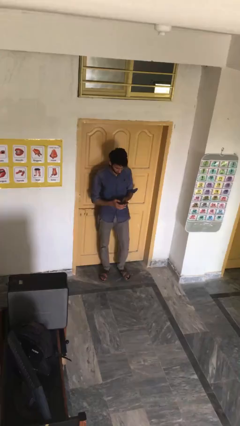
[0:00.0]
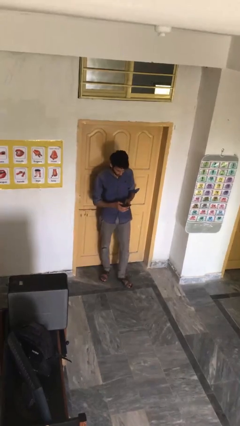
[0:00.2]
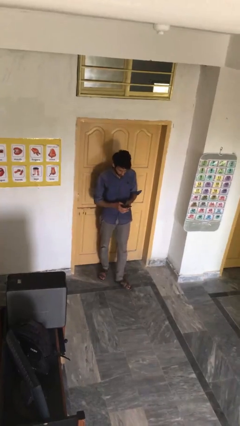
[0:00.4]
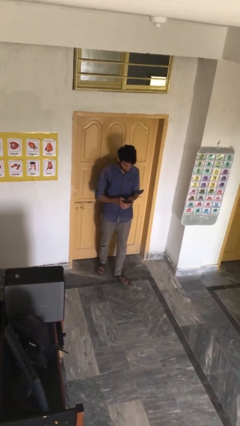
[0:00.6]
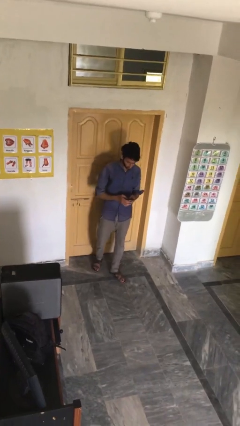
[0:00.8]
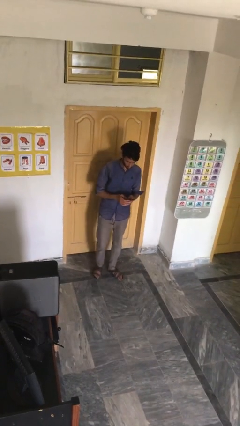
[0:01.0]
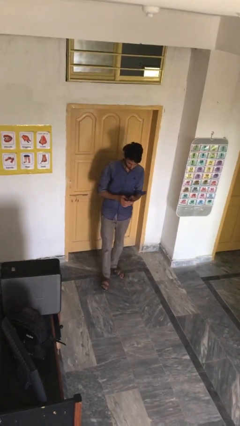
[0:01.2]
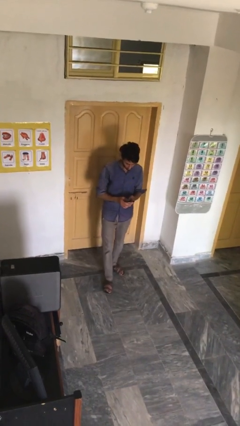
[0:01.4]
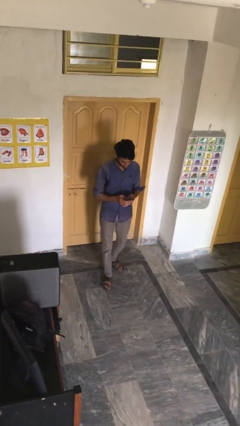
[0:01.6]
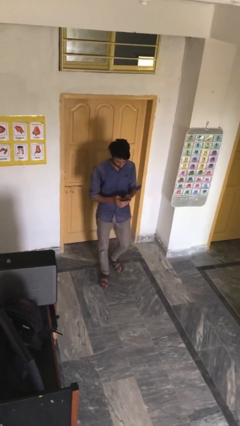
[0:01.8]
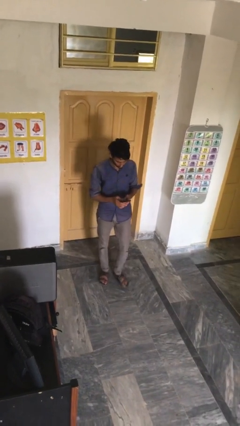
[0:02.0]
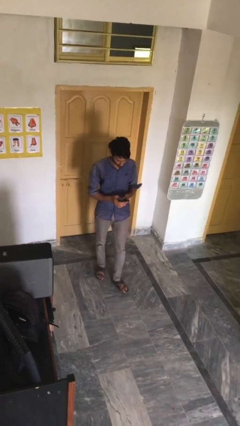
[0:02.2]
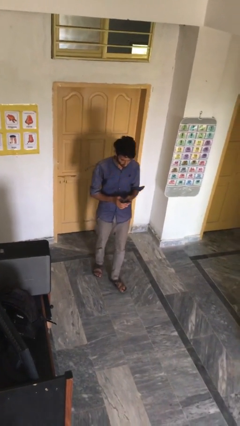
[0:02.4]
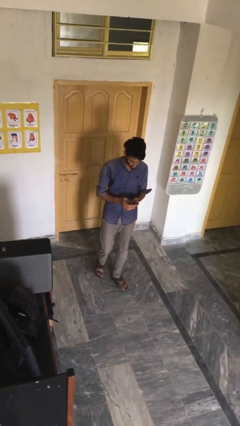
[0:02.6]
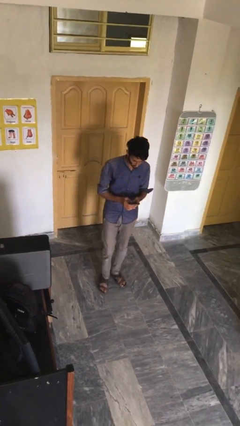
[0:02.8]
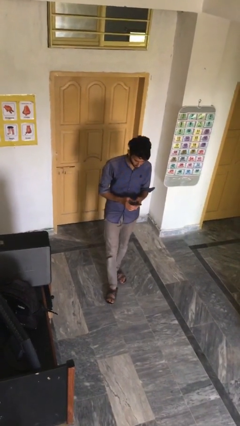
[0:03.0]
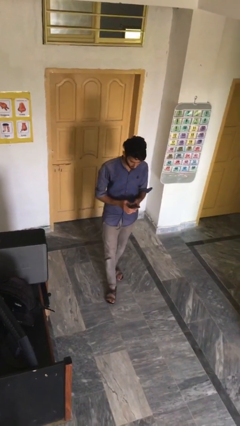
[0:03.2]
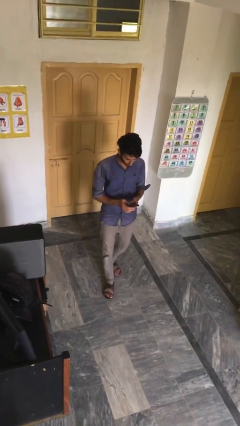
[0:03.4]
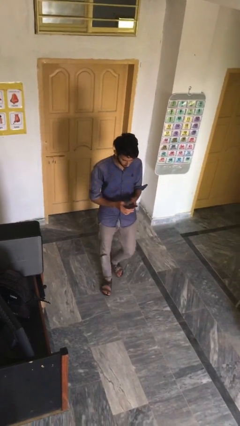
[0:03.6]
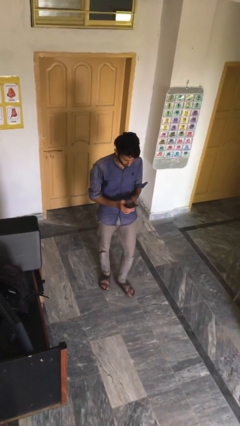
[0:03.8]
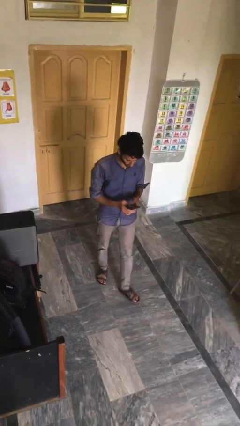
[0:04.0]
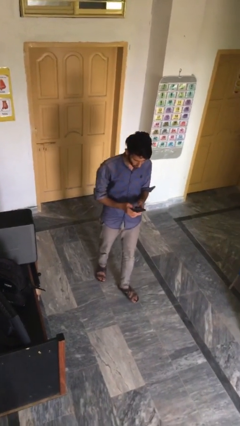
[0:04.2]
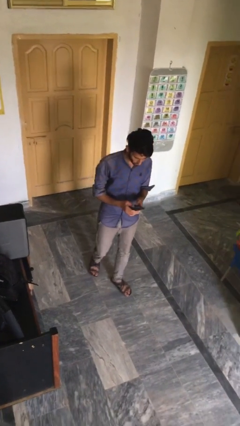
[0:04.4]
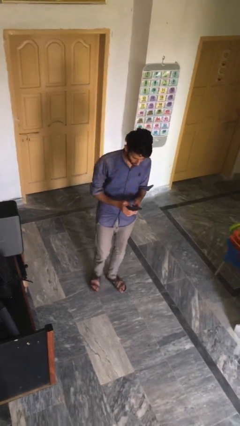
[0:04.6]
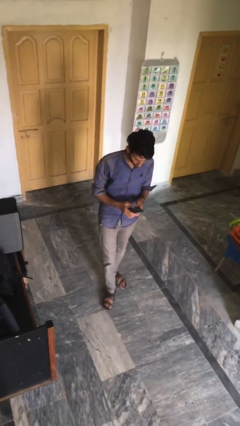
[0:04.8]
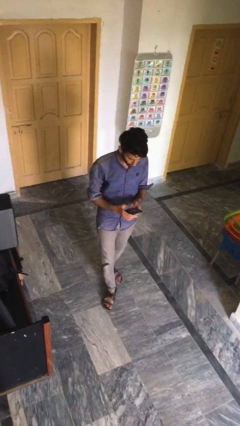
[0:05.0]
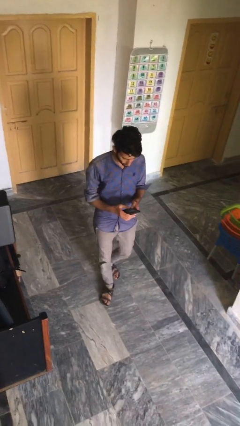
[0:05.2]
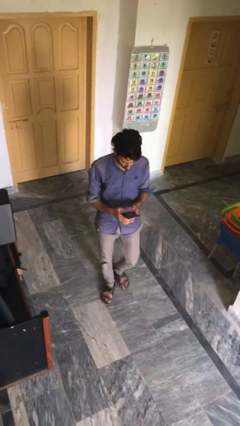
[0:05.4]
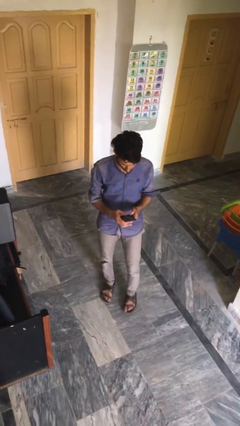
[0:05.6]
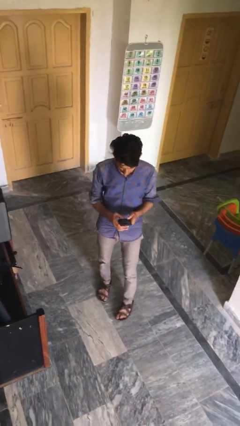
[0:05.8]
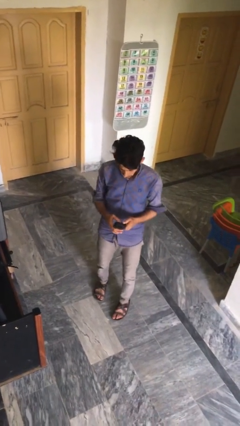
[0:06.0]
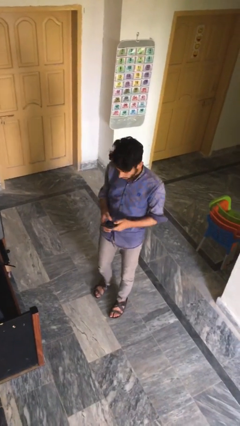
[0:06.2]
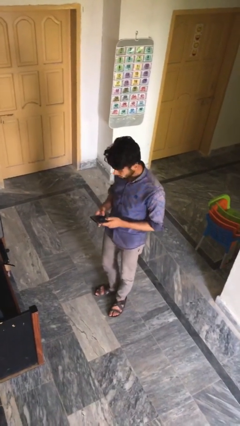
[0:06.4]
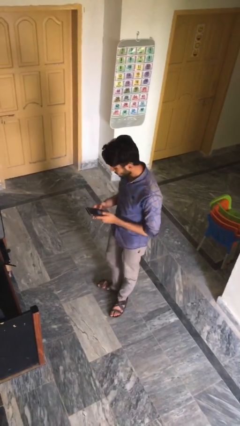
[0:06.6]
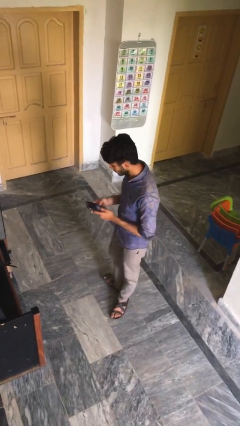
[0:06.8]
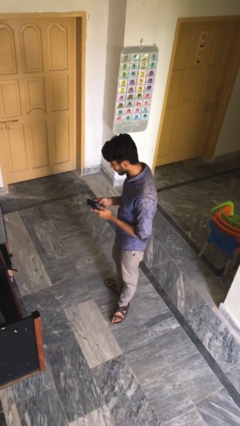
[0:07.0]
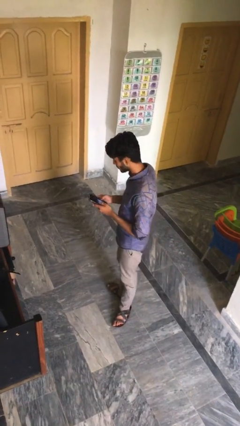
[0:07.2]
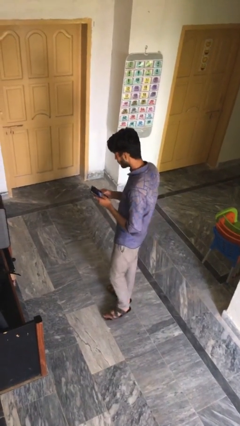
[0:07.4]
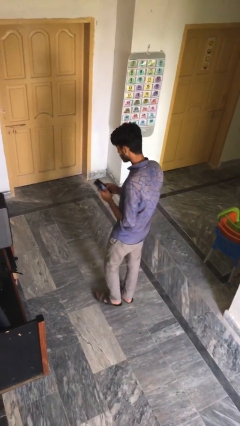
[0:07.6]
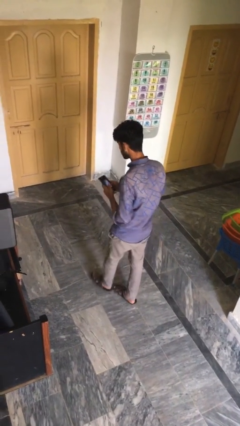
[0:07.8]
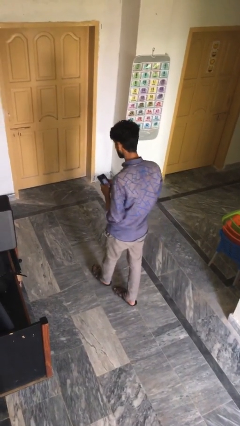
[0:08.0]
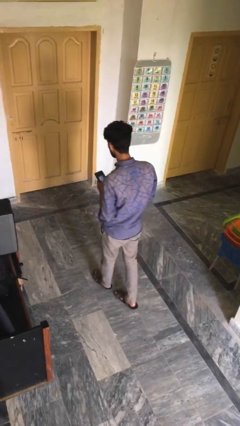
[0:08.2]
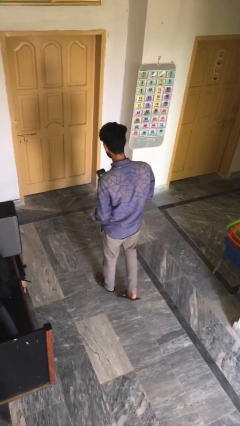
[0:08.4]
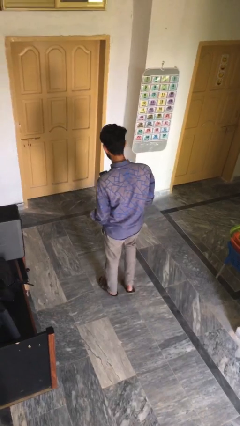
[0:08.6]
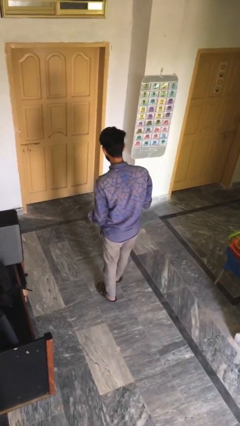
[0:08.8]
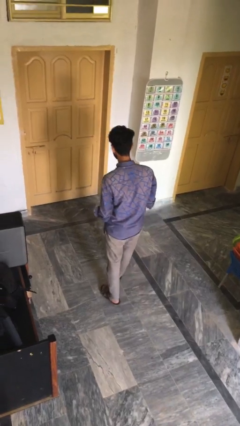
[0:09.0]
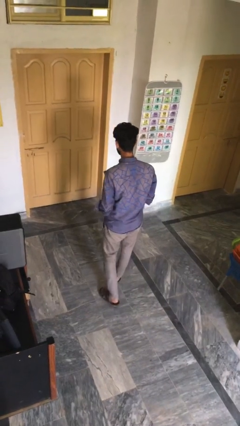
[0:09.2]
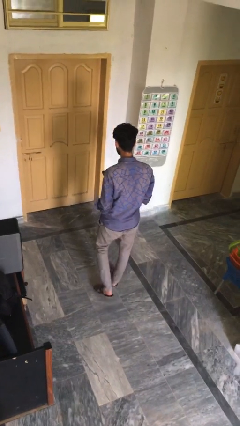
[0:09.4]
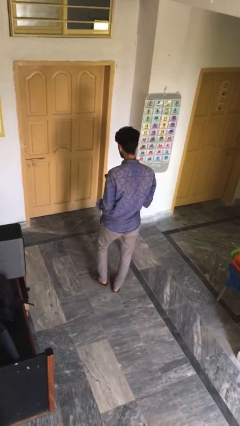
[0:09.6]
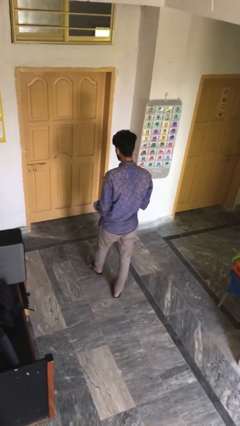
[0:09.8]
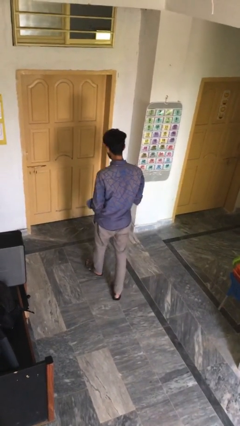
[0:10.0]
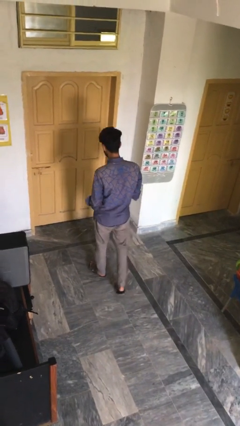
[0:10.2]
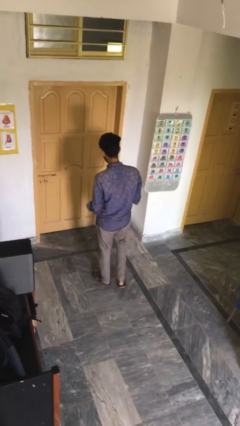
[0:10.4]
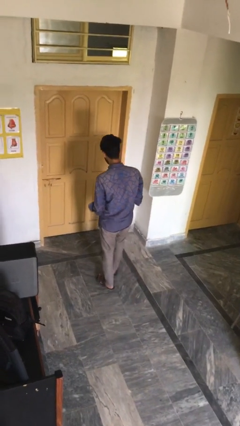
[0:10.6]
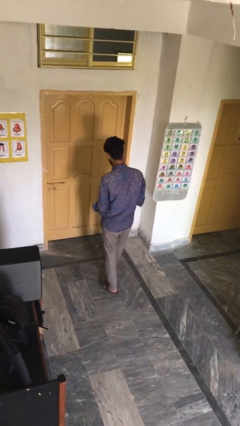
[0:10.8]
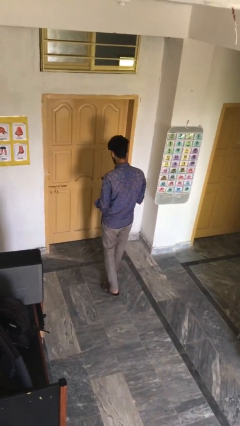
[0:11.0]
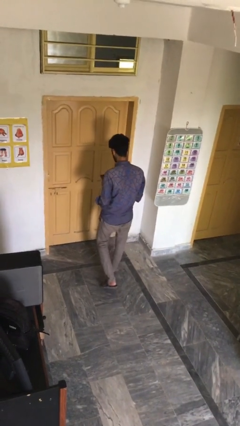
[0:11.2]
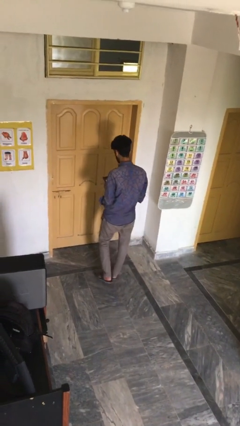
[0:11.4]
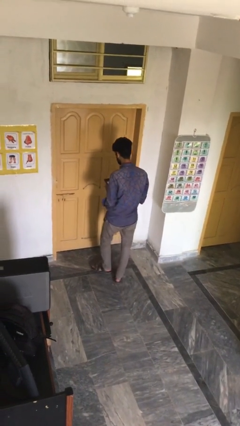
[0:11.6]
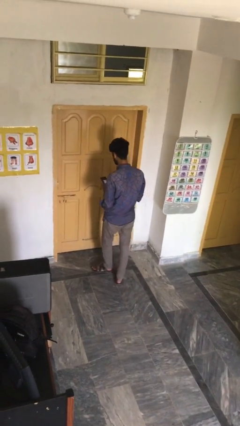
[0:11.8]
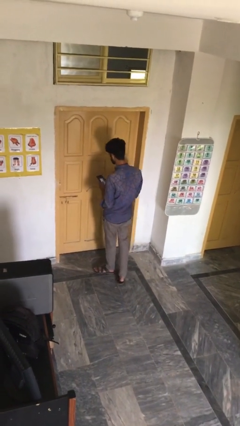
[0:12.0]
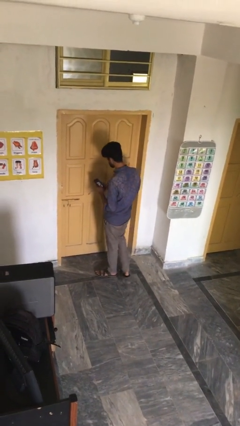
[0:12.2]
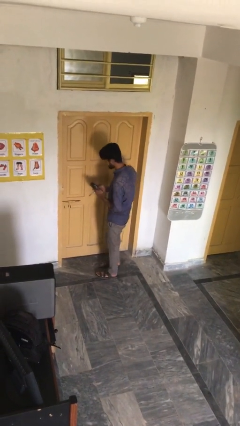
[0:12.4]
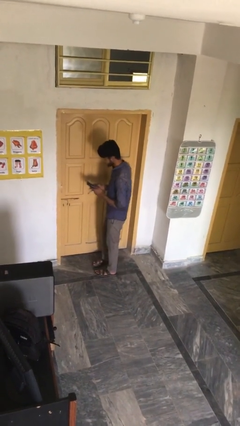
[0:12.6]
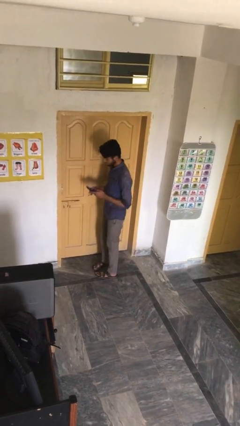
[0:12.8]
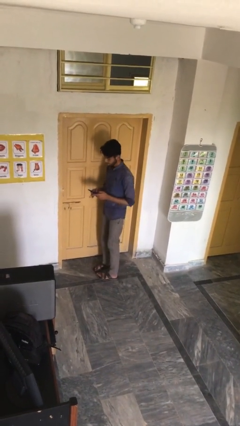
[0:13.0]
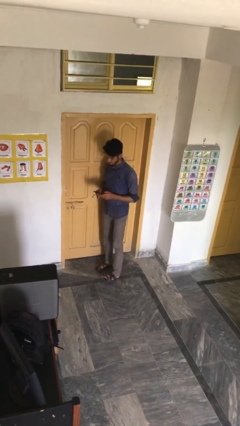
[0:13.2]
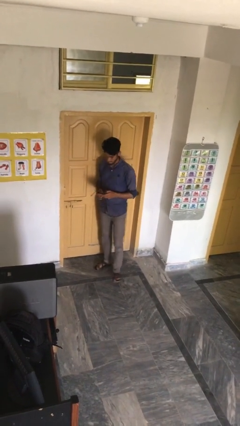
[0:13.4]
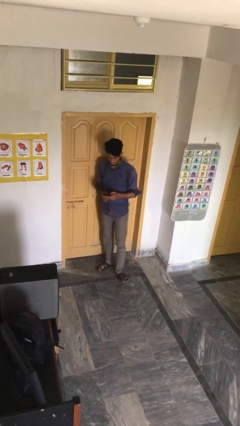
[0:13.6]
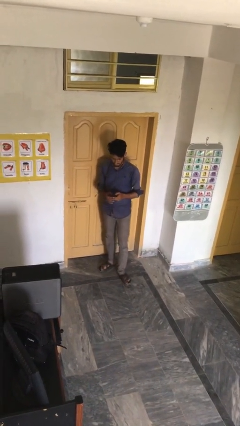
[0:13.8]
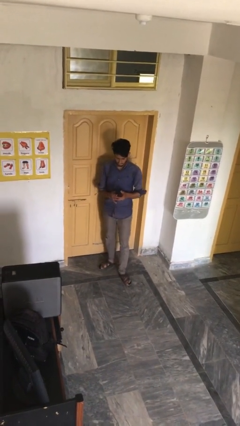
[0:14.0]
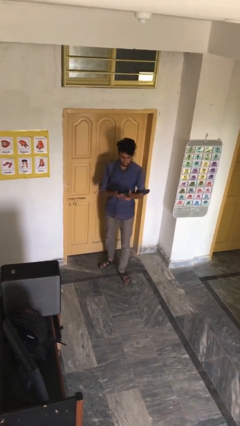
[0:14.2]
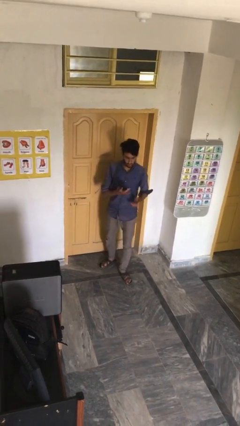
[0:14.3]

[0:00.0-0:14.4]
person texts on phone

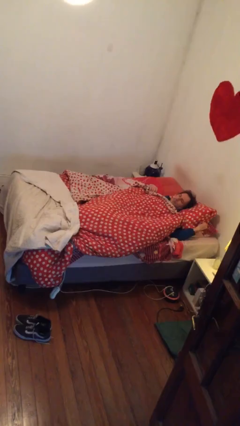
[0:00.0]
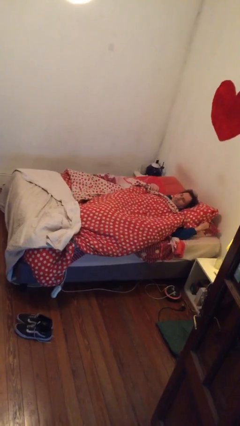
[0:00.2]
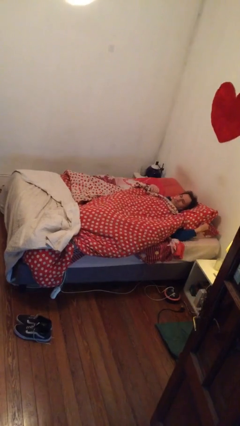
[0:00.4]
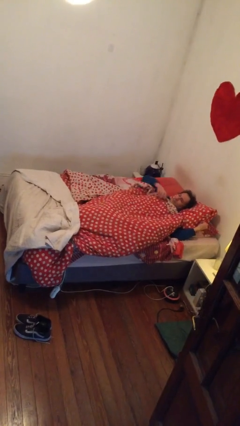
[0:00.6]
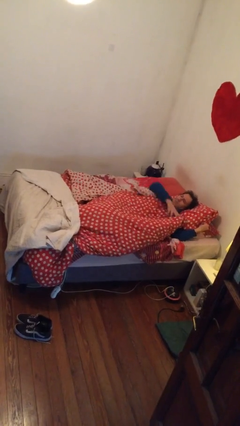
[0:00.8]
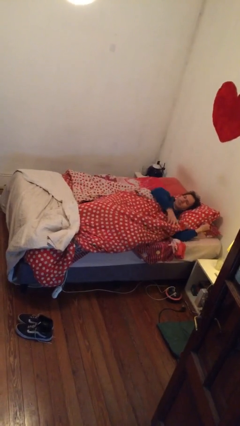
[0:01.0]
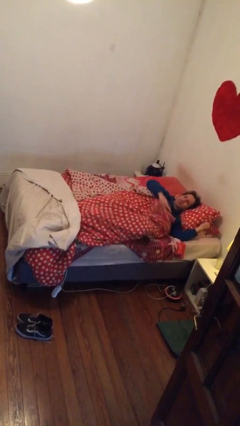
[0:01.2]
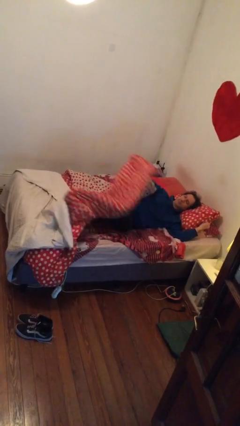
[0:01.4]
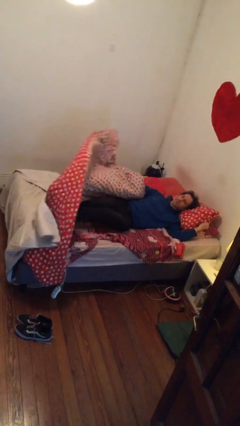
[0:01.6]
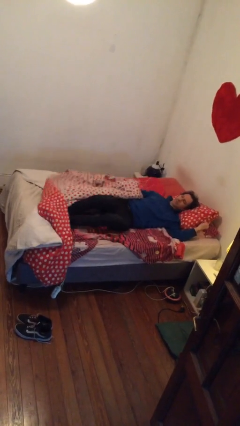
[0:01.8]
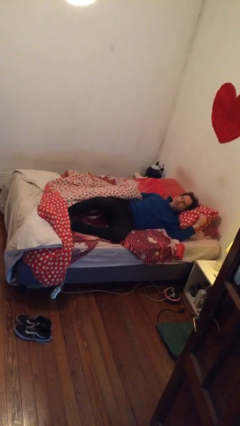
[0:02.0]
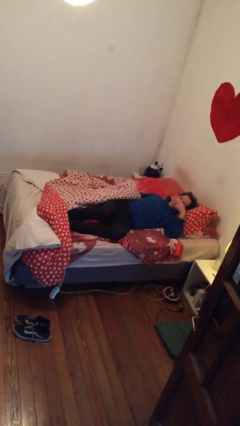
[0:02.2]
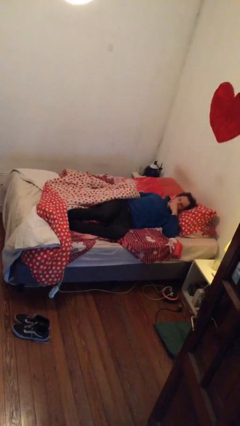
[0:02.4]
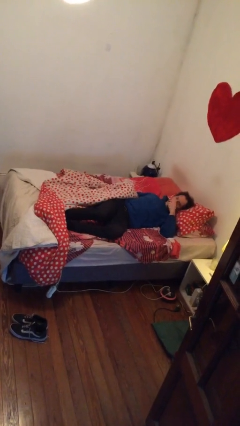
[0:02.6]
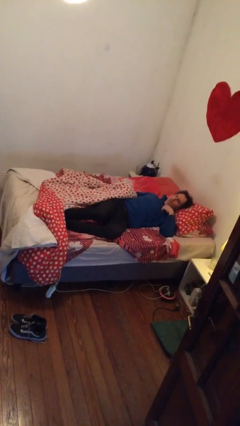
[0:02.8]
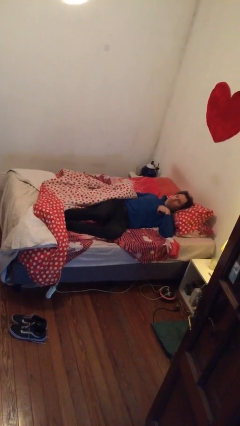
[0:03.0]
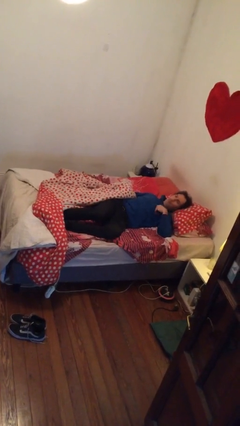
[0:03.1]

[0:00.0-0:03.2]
person uncovers with bedsheets

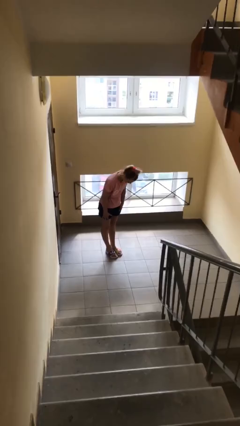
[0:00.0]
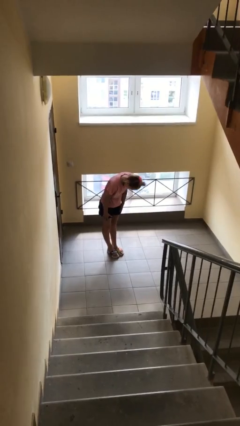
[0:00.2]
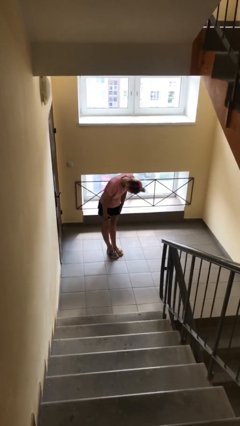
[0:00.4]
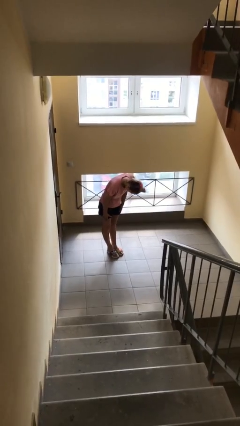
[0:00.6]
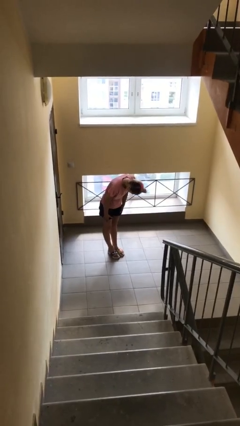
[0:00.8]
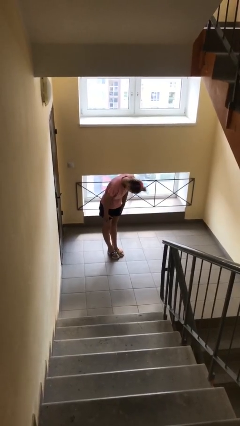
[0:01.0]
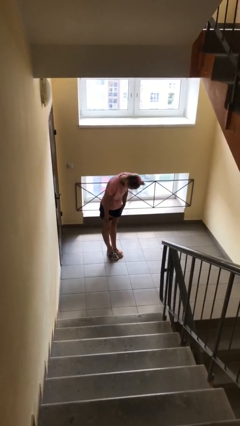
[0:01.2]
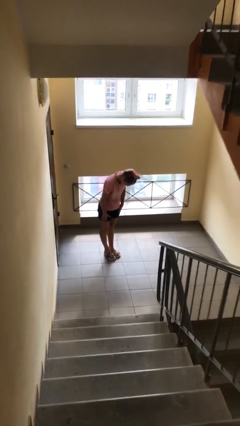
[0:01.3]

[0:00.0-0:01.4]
person bows
